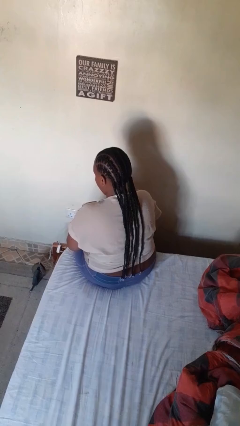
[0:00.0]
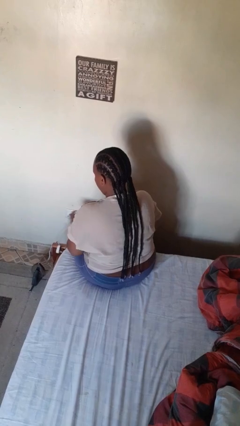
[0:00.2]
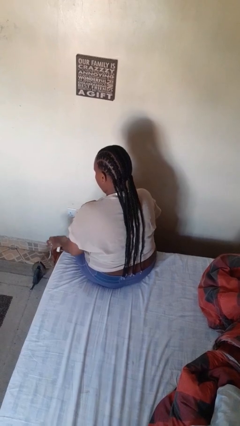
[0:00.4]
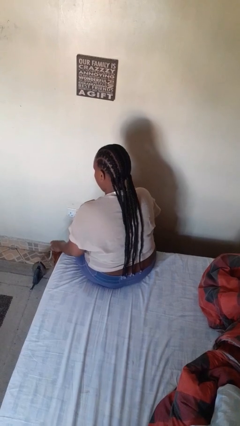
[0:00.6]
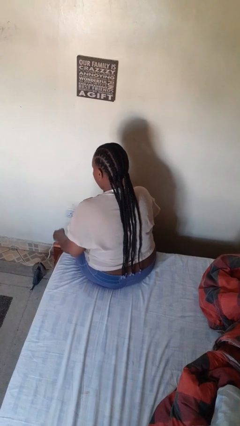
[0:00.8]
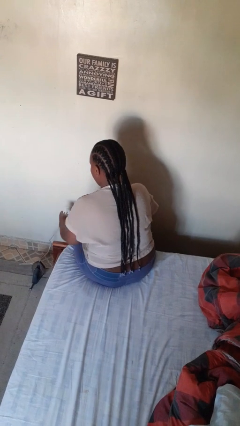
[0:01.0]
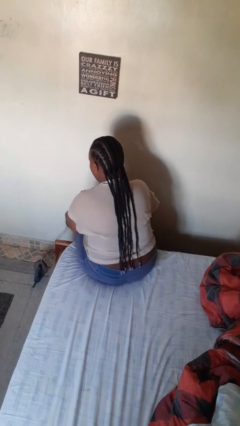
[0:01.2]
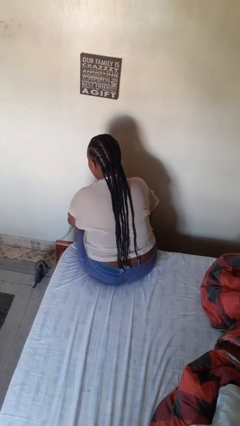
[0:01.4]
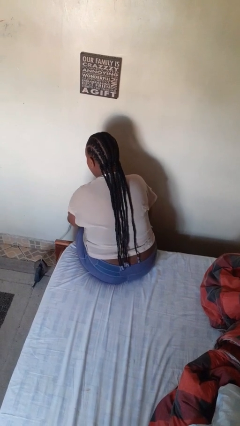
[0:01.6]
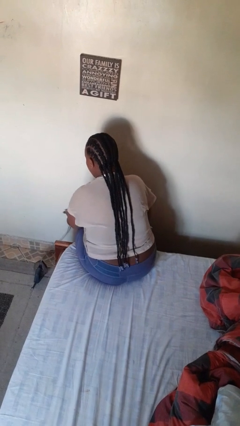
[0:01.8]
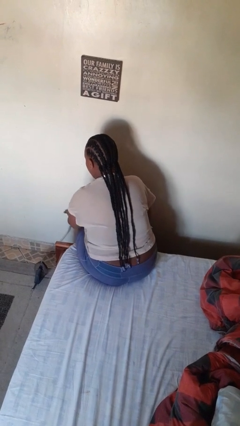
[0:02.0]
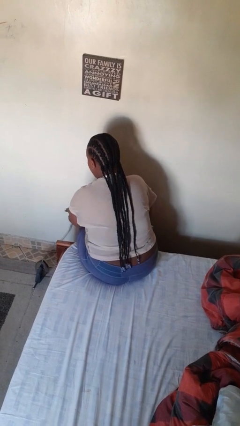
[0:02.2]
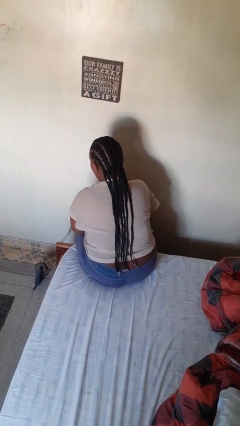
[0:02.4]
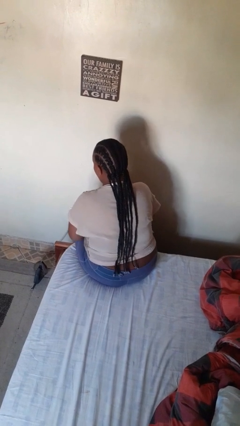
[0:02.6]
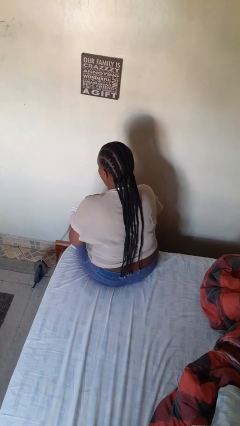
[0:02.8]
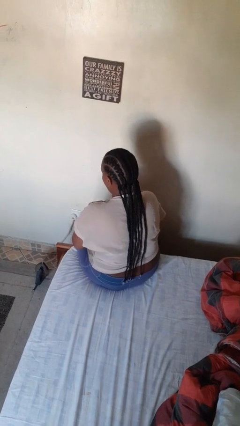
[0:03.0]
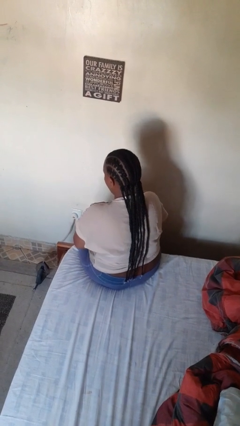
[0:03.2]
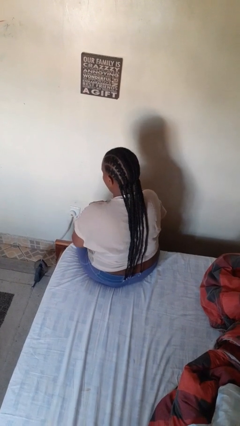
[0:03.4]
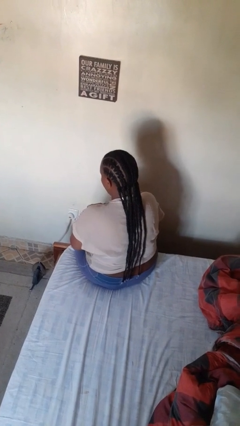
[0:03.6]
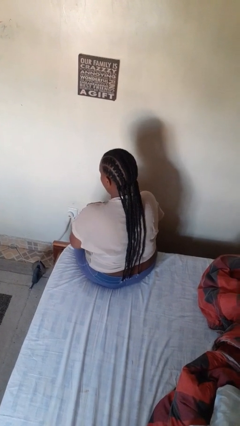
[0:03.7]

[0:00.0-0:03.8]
person plugs into electrical socket

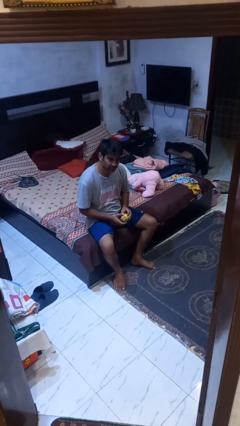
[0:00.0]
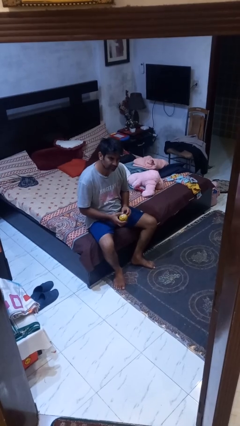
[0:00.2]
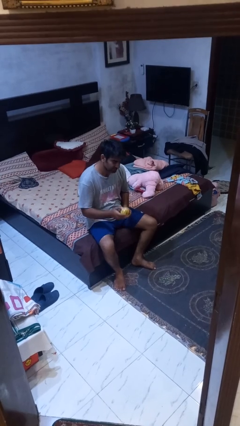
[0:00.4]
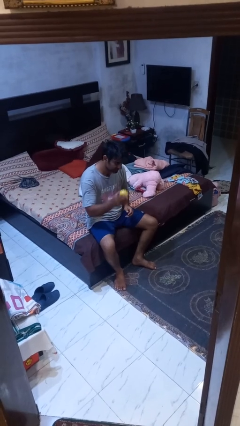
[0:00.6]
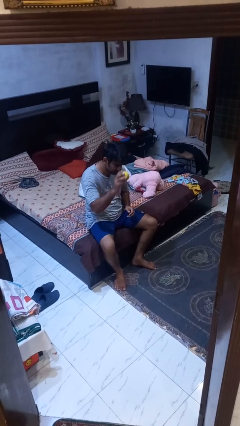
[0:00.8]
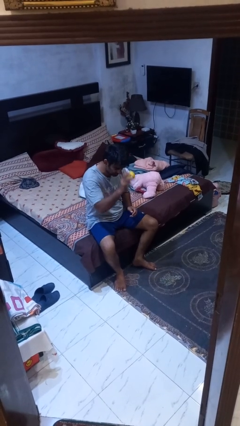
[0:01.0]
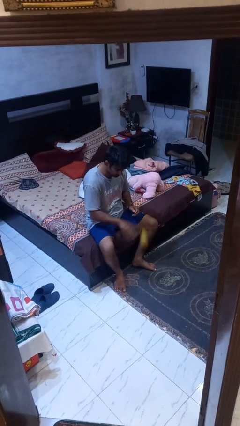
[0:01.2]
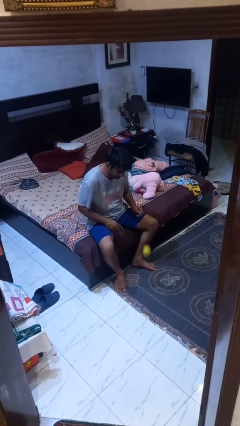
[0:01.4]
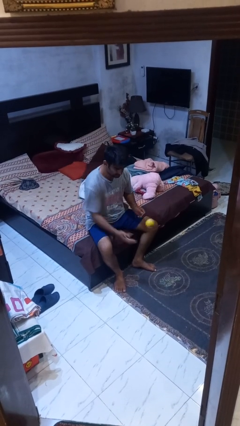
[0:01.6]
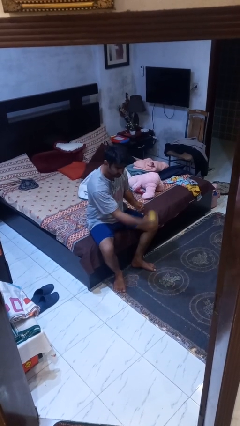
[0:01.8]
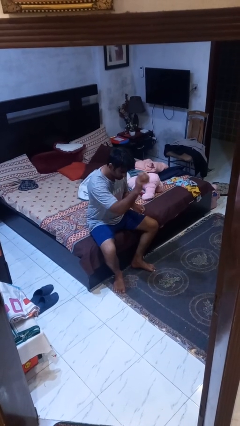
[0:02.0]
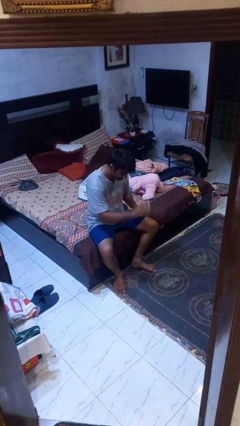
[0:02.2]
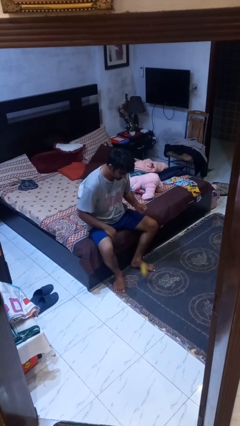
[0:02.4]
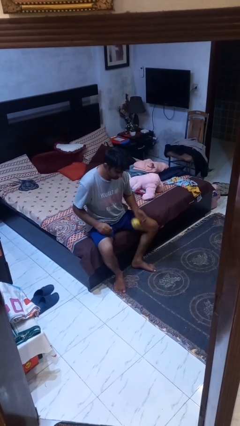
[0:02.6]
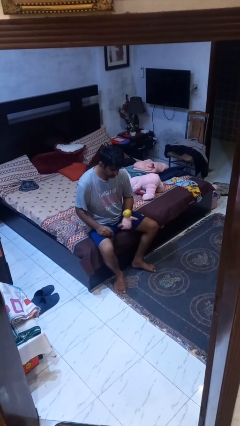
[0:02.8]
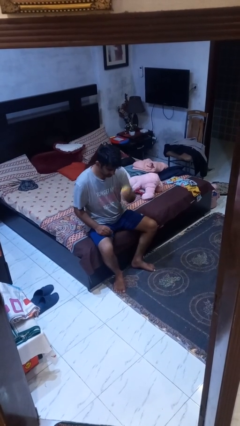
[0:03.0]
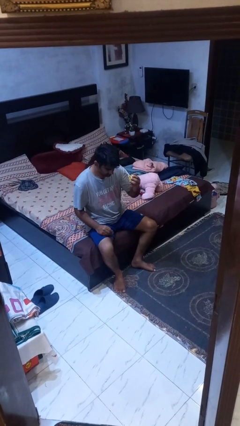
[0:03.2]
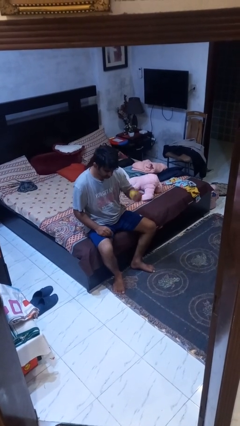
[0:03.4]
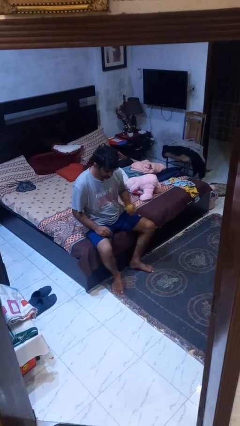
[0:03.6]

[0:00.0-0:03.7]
person bounces ball on floor

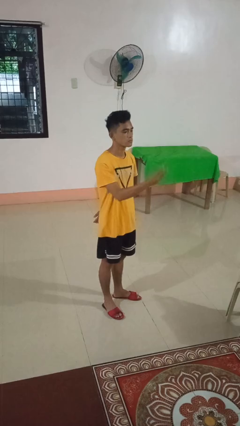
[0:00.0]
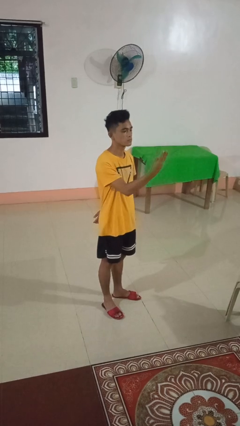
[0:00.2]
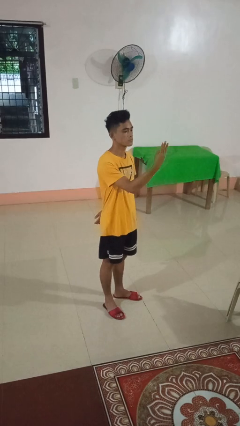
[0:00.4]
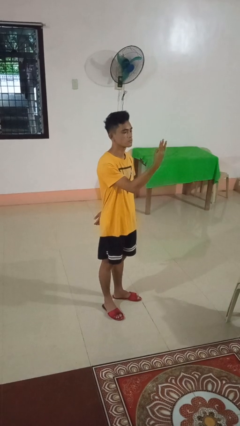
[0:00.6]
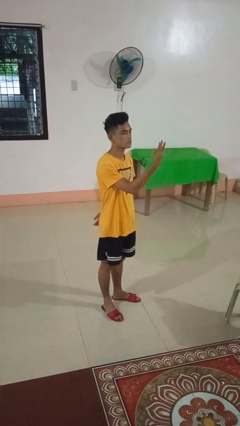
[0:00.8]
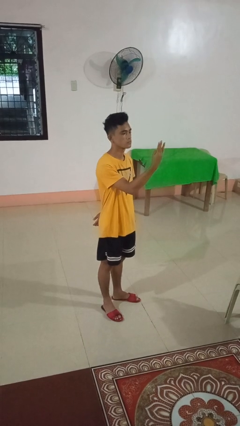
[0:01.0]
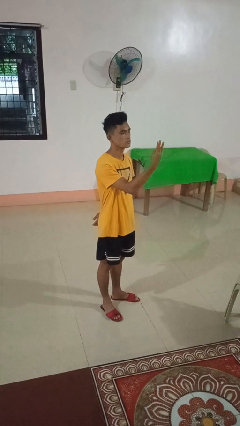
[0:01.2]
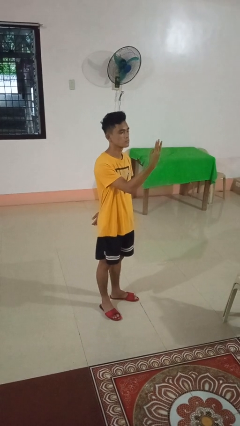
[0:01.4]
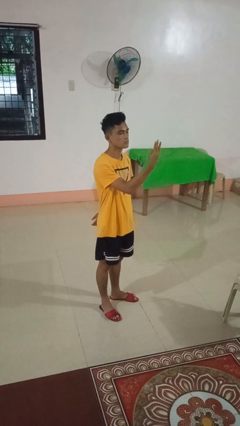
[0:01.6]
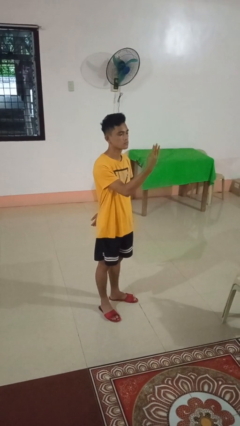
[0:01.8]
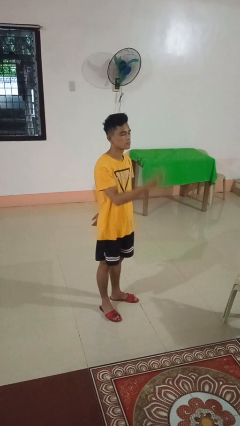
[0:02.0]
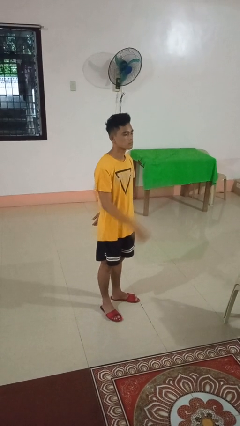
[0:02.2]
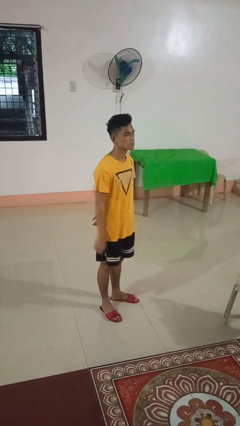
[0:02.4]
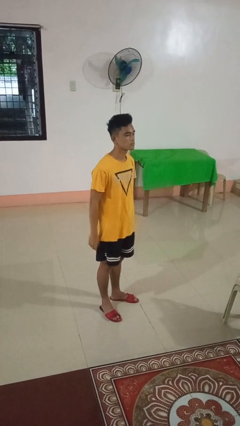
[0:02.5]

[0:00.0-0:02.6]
person gestures number three

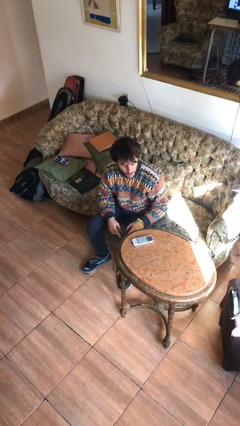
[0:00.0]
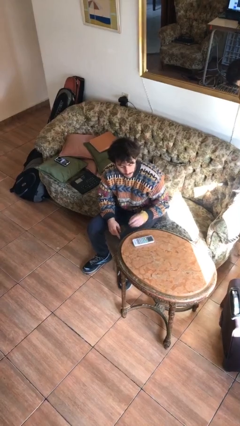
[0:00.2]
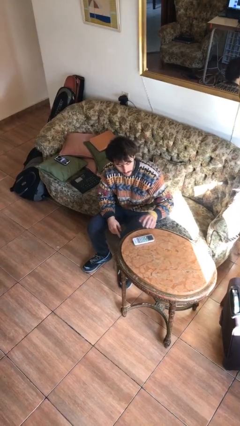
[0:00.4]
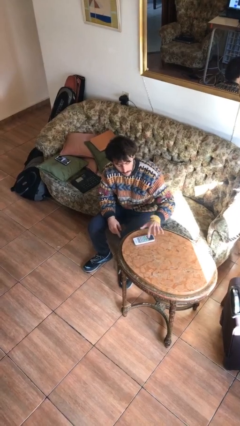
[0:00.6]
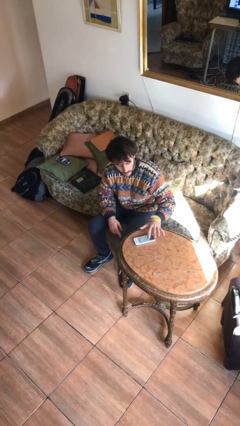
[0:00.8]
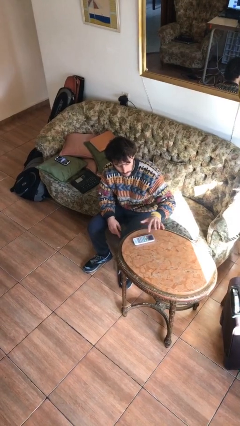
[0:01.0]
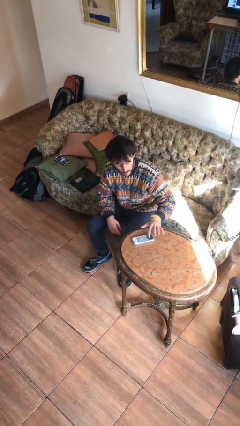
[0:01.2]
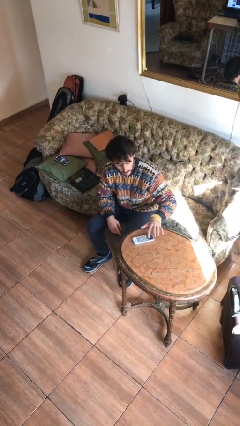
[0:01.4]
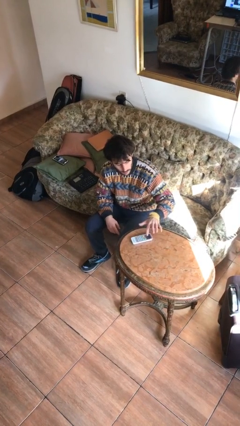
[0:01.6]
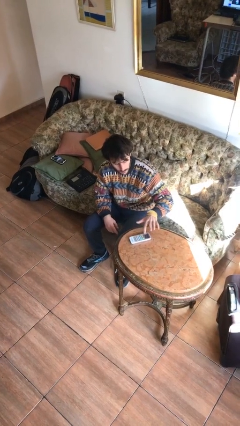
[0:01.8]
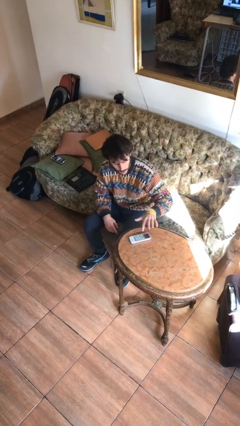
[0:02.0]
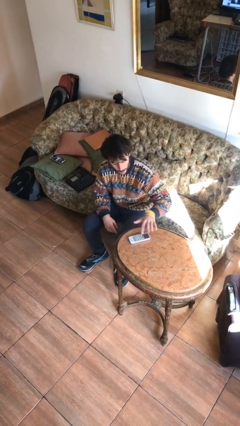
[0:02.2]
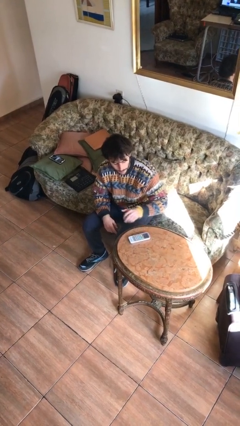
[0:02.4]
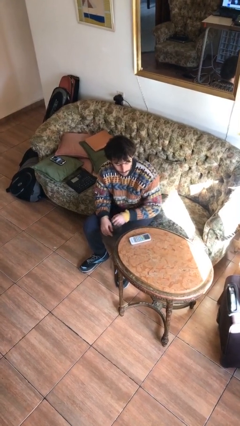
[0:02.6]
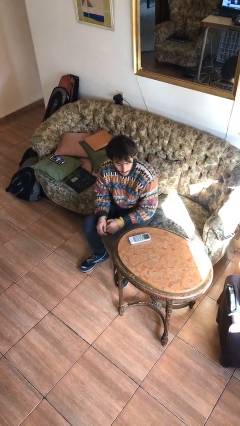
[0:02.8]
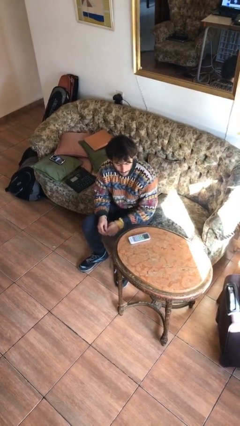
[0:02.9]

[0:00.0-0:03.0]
person taps object with finger

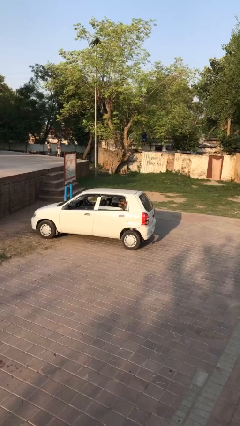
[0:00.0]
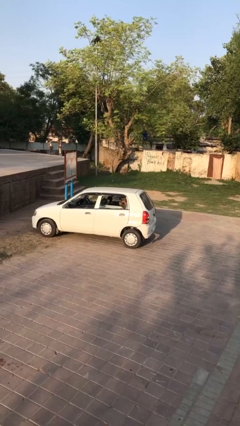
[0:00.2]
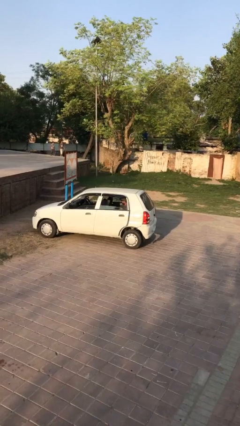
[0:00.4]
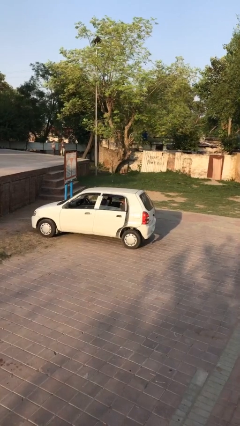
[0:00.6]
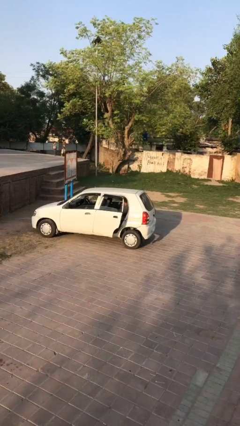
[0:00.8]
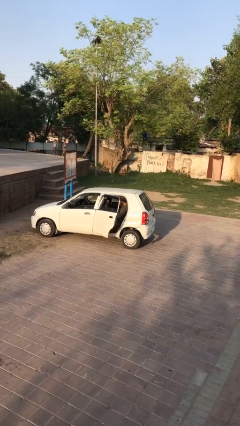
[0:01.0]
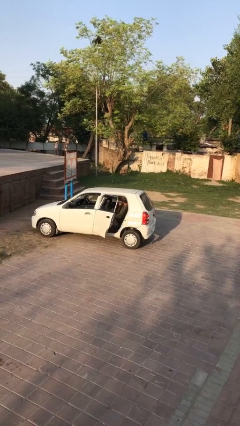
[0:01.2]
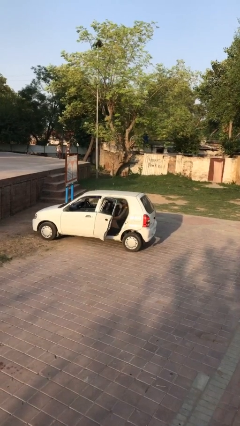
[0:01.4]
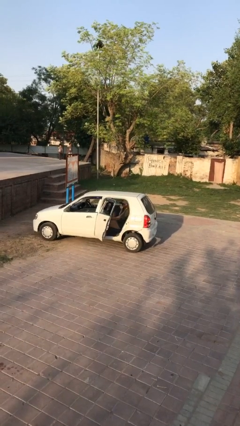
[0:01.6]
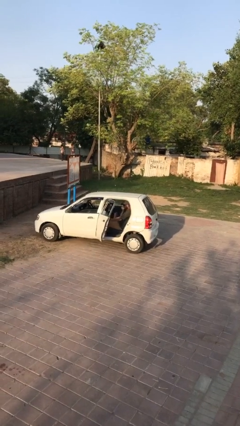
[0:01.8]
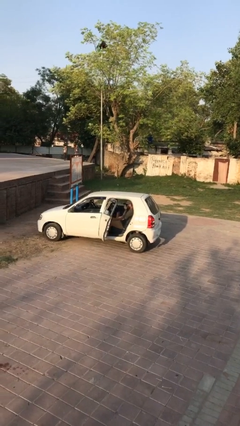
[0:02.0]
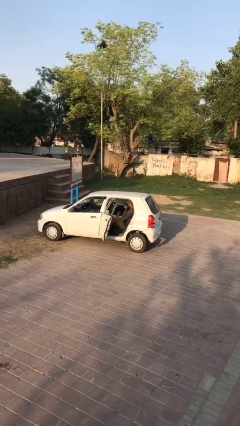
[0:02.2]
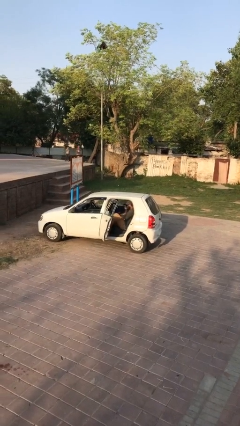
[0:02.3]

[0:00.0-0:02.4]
person opens car door

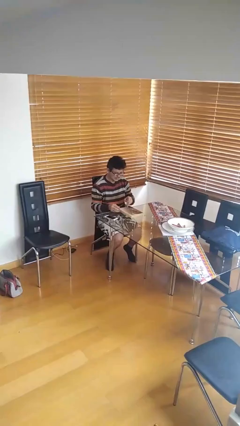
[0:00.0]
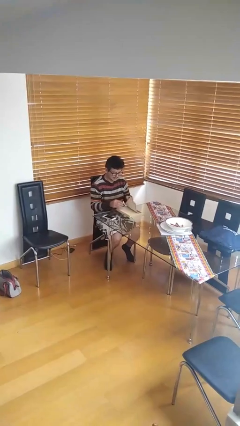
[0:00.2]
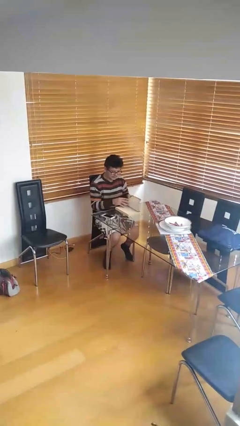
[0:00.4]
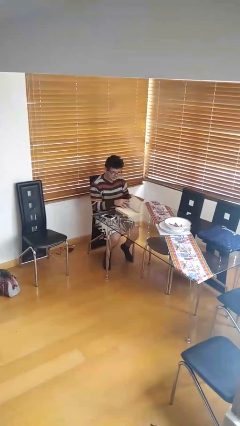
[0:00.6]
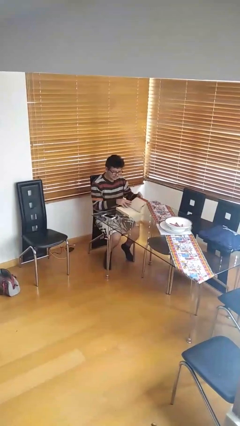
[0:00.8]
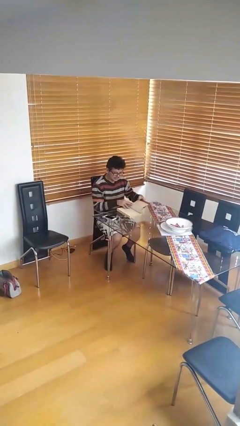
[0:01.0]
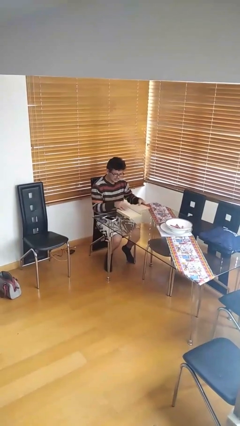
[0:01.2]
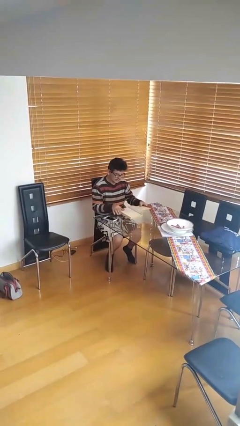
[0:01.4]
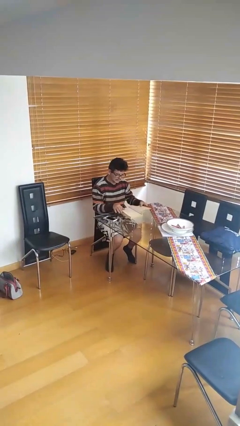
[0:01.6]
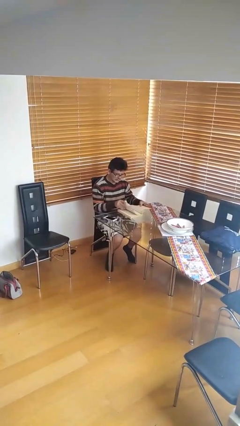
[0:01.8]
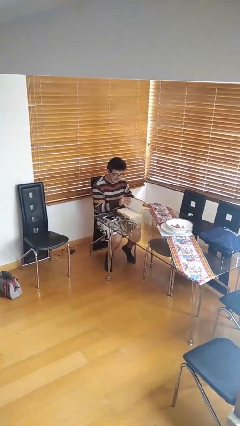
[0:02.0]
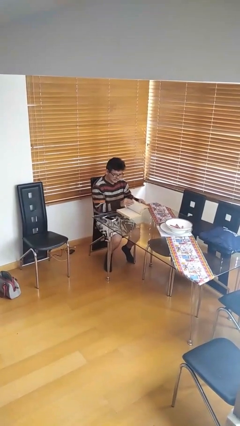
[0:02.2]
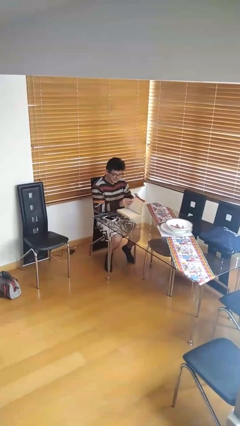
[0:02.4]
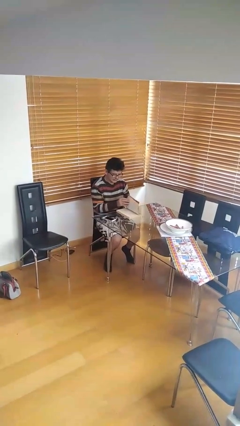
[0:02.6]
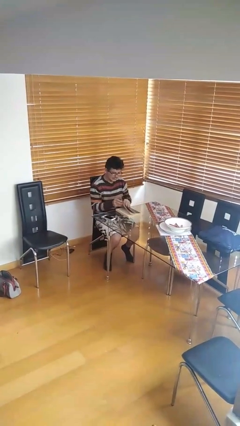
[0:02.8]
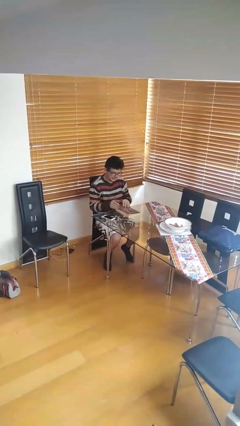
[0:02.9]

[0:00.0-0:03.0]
person reads document
